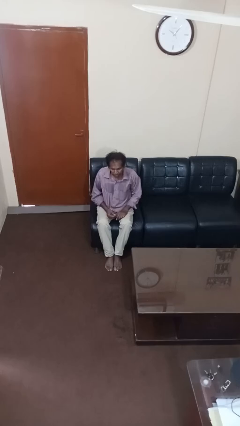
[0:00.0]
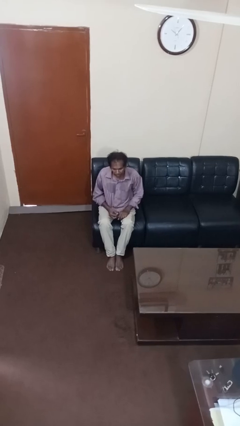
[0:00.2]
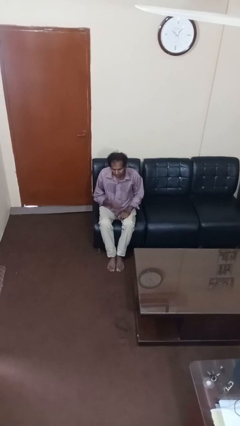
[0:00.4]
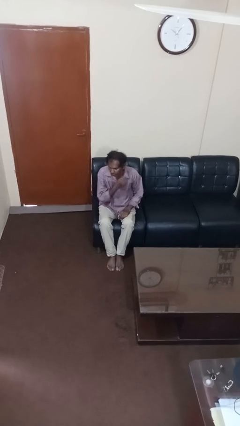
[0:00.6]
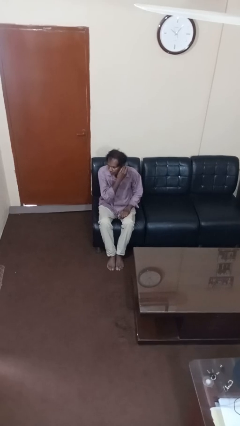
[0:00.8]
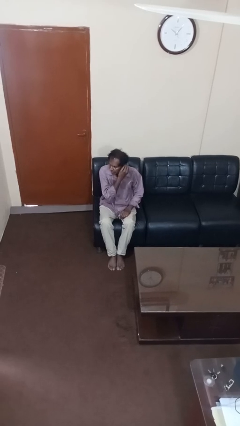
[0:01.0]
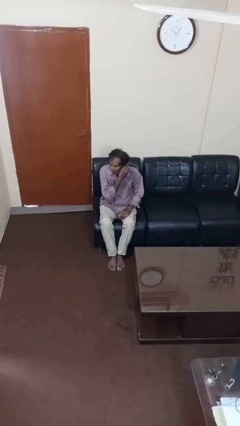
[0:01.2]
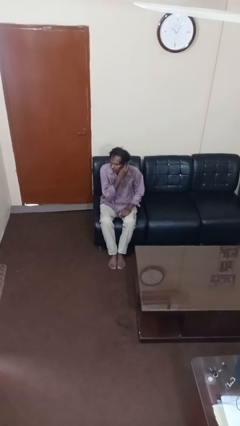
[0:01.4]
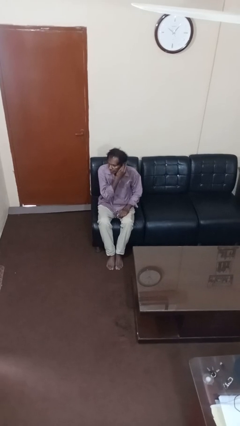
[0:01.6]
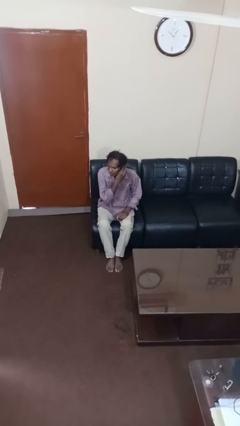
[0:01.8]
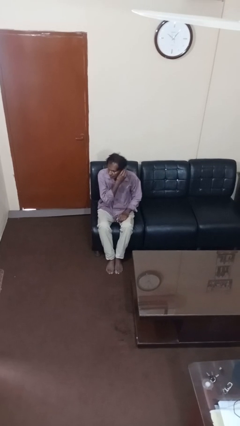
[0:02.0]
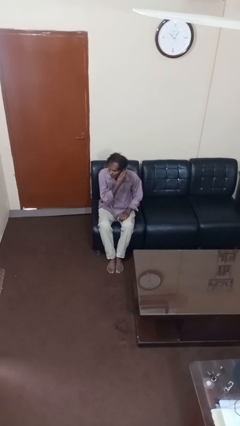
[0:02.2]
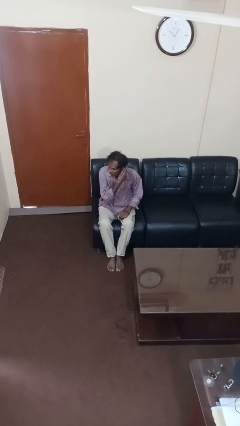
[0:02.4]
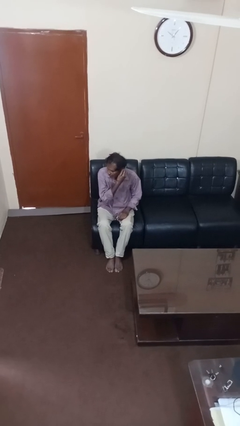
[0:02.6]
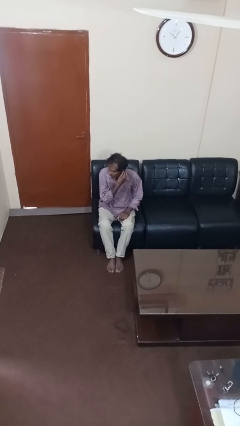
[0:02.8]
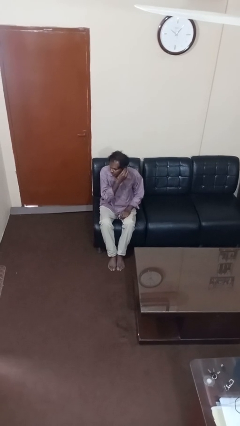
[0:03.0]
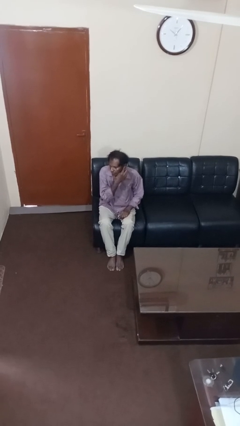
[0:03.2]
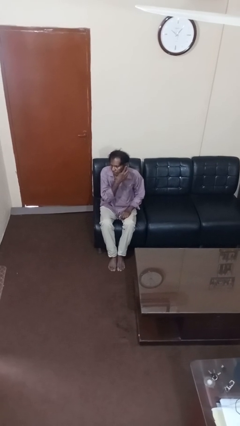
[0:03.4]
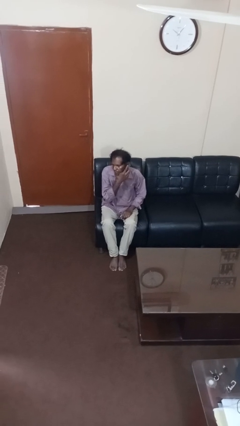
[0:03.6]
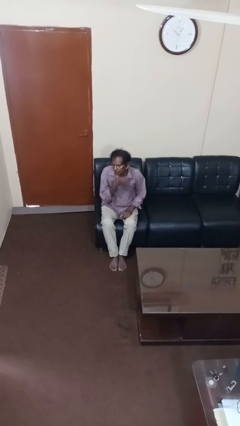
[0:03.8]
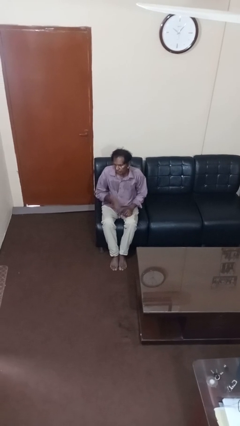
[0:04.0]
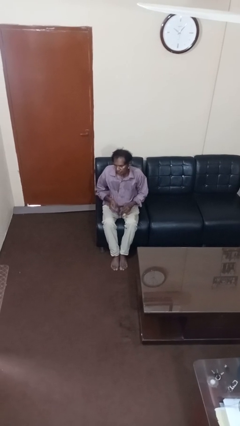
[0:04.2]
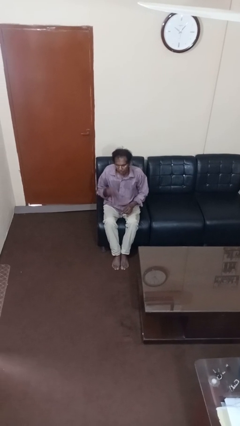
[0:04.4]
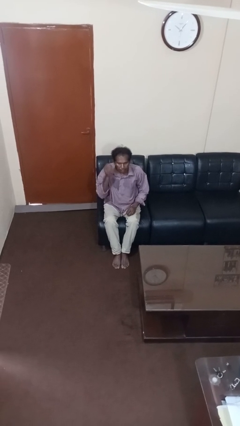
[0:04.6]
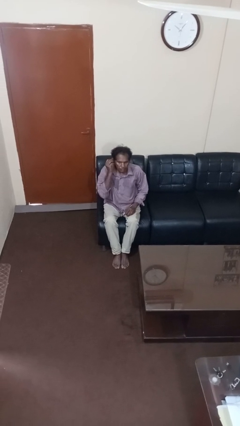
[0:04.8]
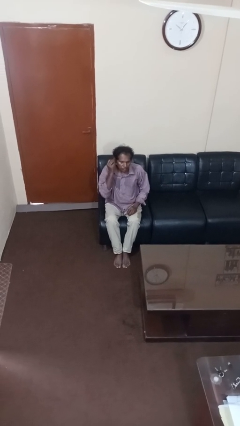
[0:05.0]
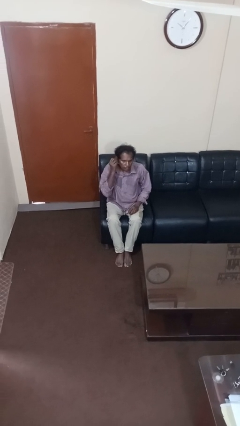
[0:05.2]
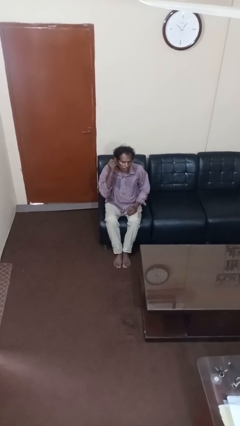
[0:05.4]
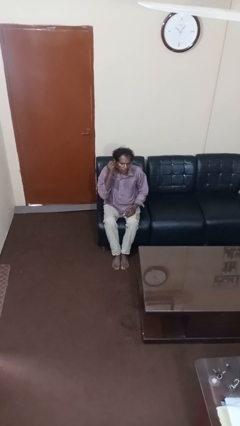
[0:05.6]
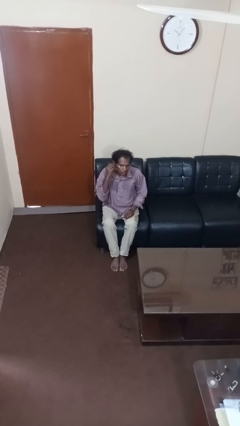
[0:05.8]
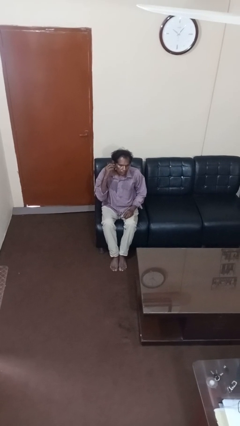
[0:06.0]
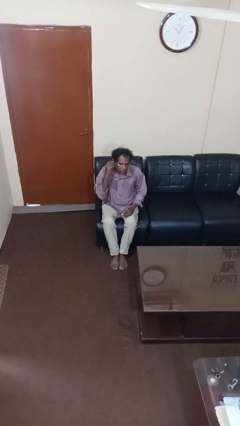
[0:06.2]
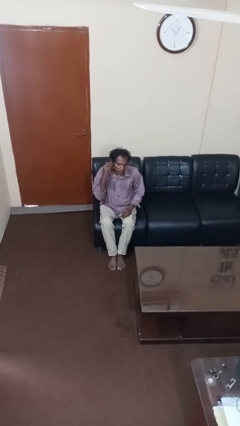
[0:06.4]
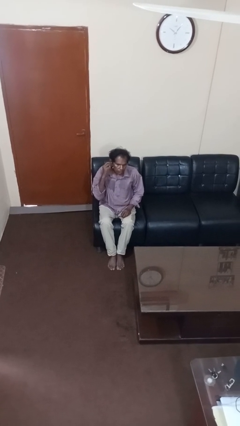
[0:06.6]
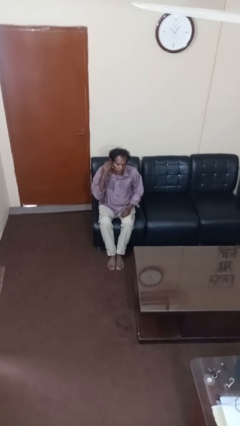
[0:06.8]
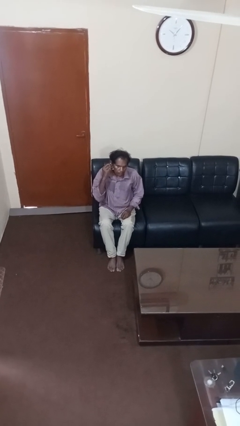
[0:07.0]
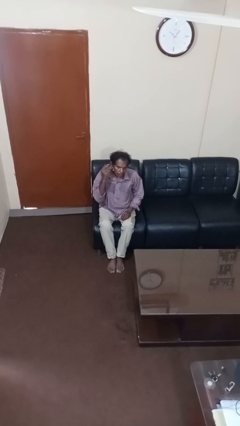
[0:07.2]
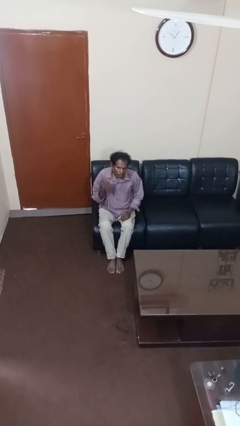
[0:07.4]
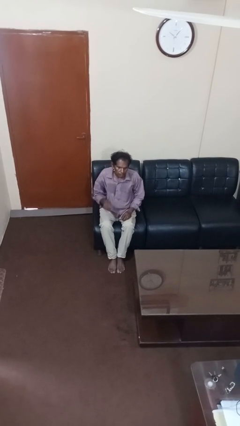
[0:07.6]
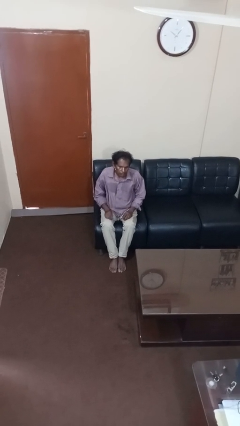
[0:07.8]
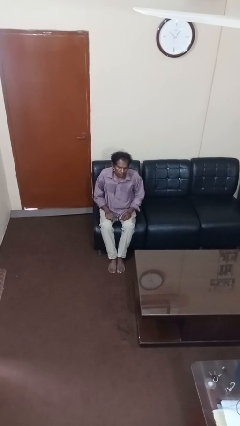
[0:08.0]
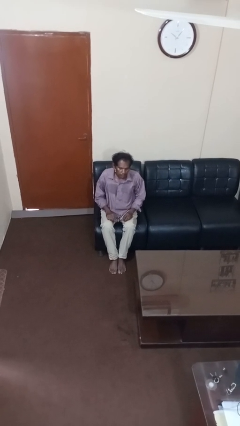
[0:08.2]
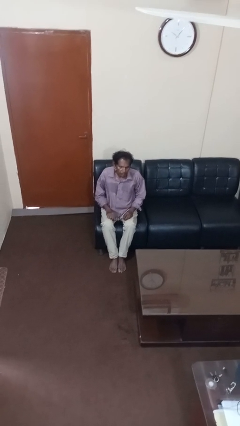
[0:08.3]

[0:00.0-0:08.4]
person puts on earrings

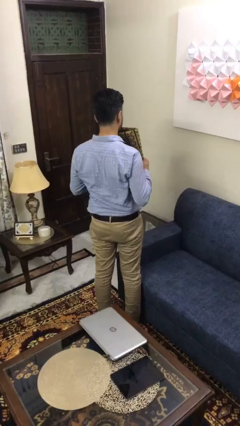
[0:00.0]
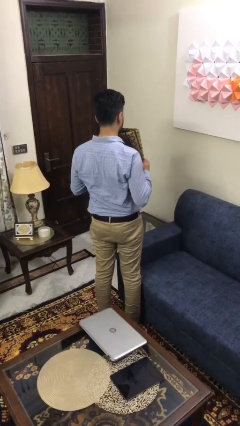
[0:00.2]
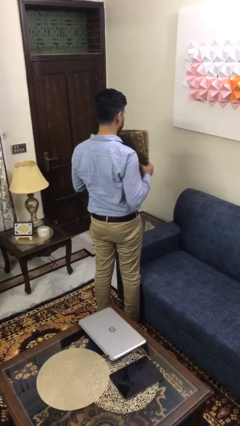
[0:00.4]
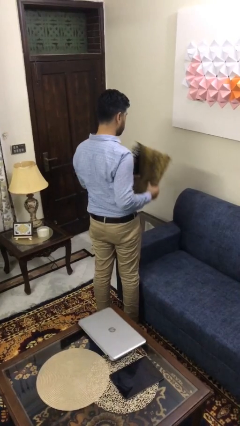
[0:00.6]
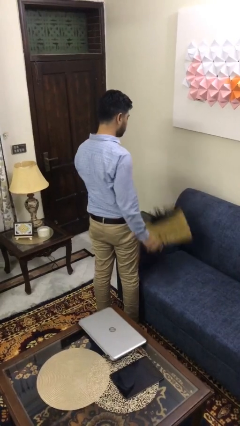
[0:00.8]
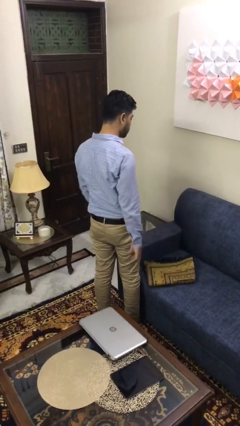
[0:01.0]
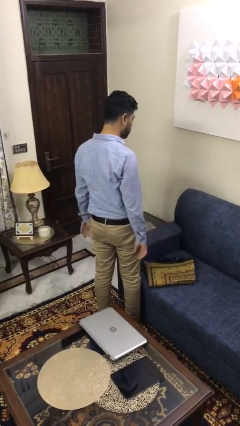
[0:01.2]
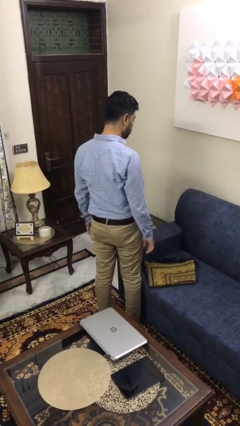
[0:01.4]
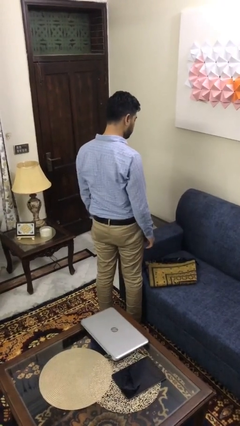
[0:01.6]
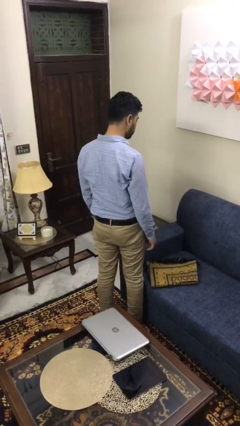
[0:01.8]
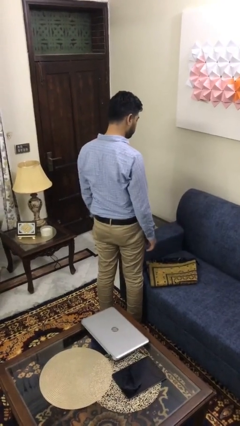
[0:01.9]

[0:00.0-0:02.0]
person puts down object on couch

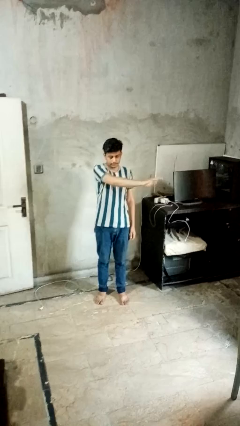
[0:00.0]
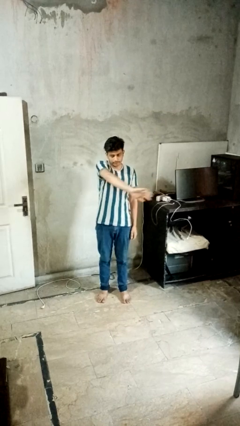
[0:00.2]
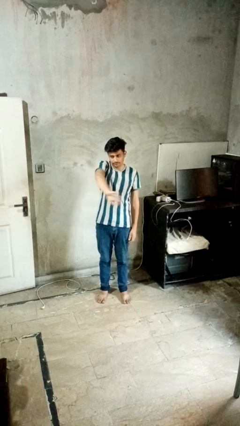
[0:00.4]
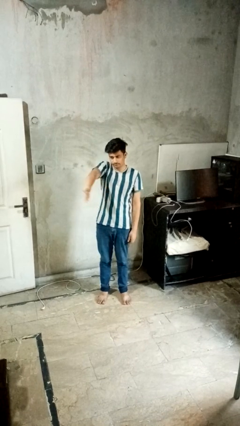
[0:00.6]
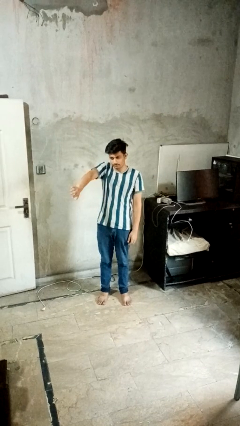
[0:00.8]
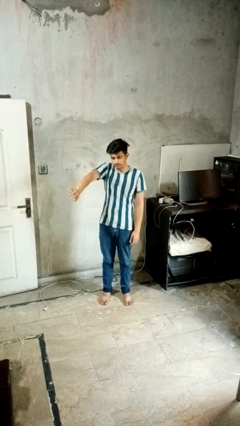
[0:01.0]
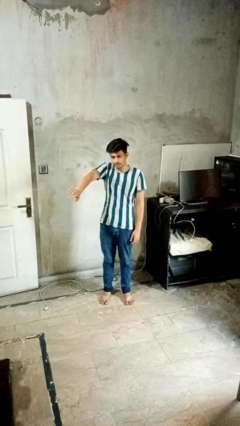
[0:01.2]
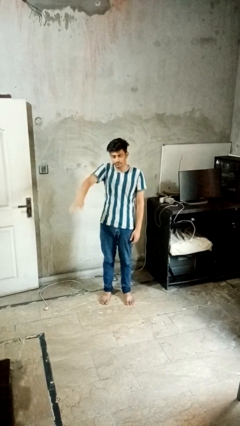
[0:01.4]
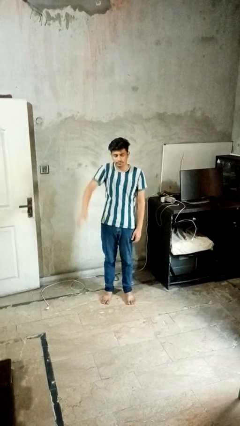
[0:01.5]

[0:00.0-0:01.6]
person gestures swipe right

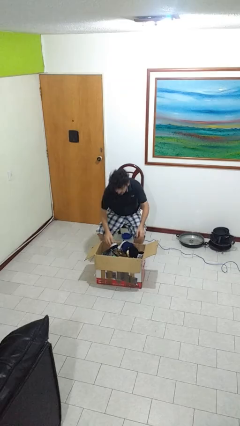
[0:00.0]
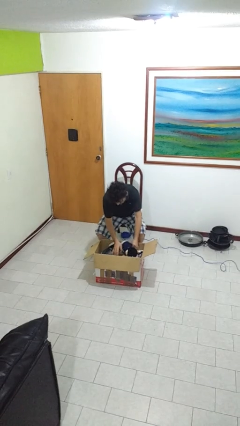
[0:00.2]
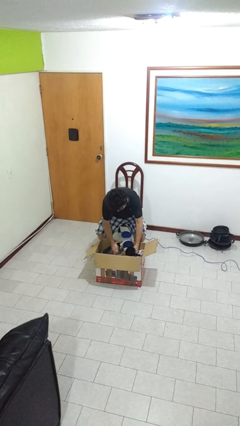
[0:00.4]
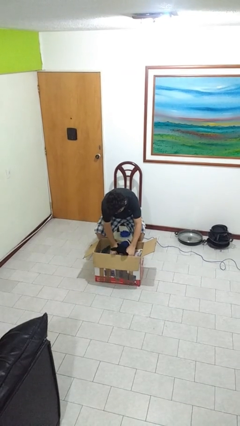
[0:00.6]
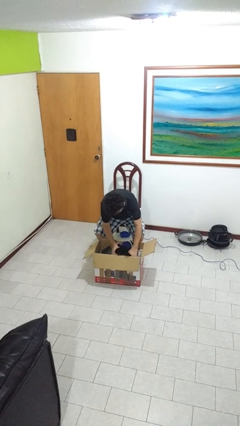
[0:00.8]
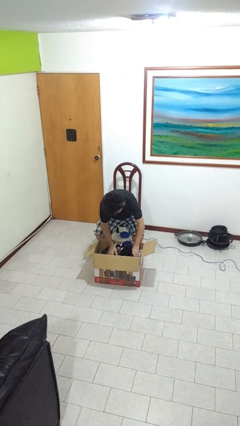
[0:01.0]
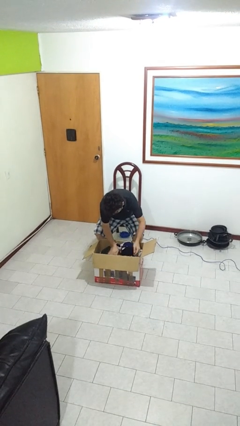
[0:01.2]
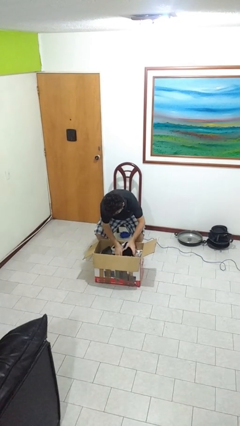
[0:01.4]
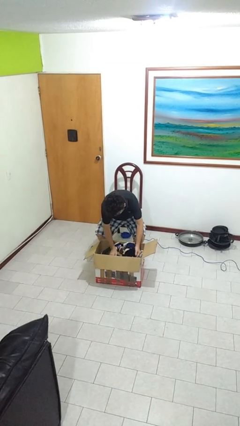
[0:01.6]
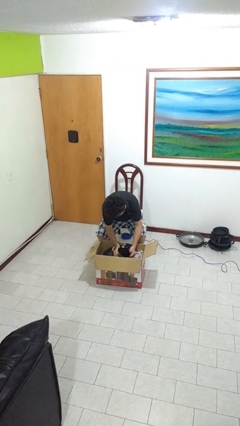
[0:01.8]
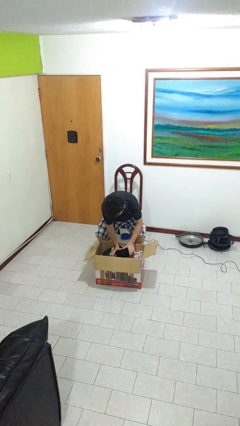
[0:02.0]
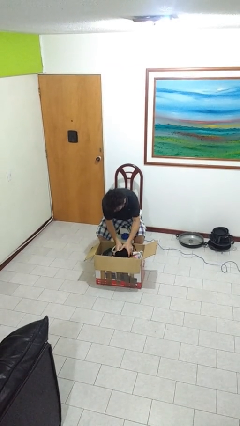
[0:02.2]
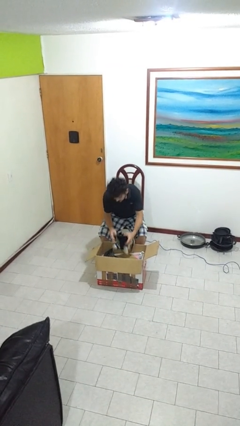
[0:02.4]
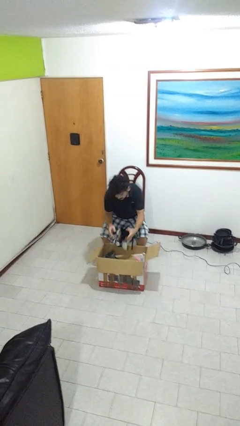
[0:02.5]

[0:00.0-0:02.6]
person searches in box

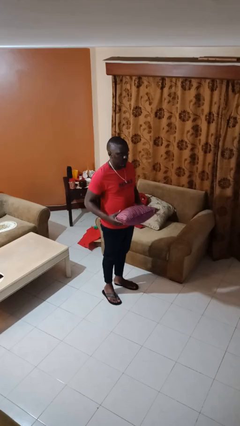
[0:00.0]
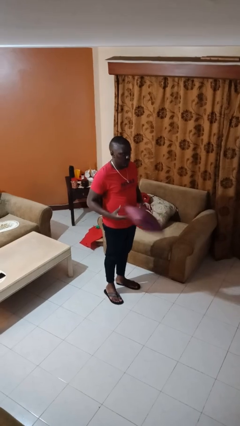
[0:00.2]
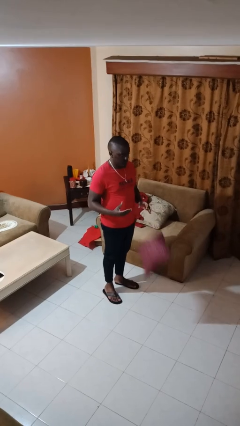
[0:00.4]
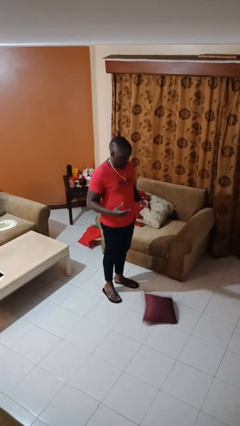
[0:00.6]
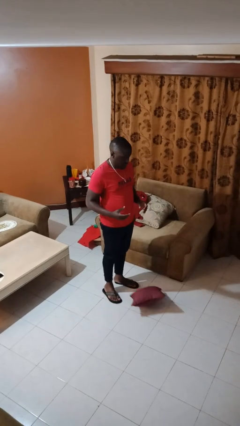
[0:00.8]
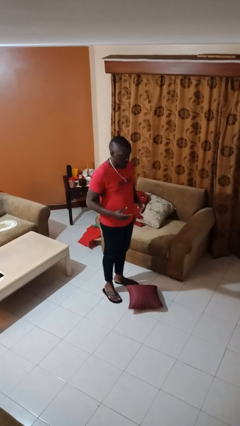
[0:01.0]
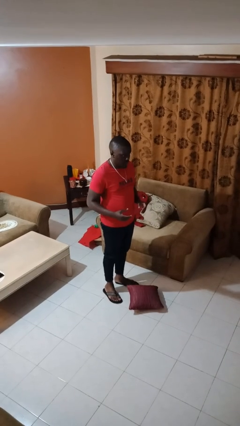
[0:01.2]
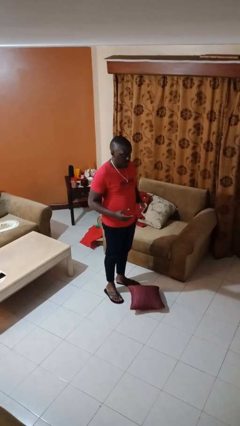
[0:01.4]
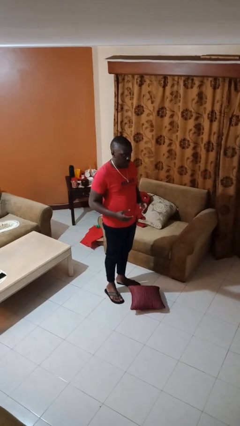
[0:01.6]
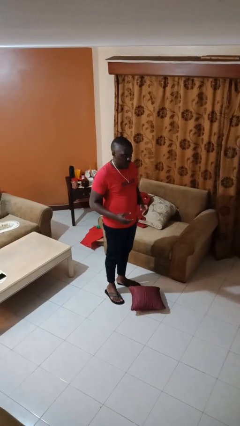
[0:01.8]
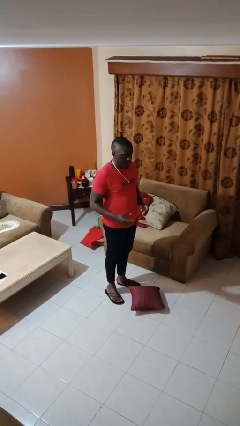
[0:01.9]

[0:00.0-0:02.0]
person drops object

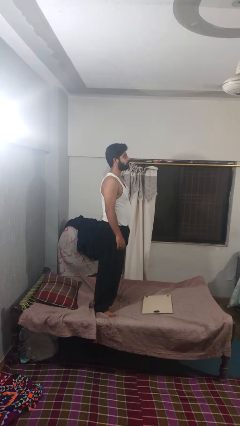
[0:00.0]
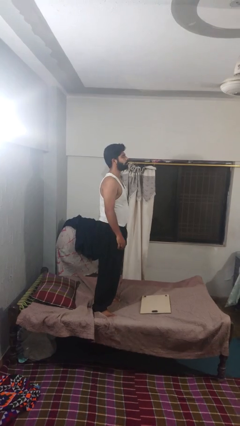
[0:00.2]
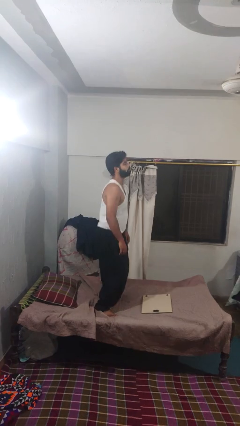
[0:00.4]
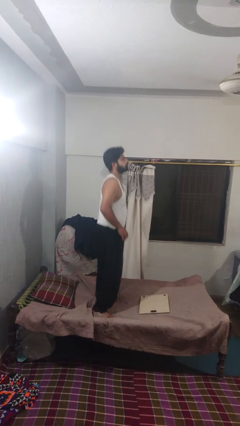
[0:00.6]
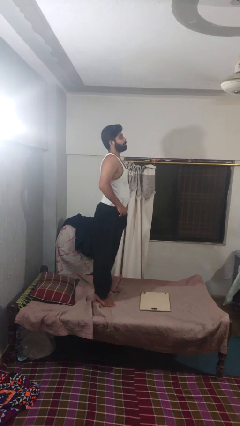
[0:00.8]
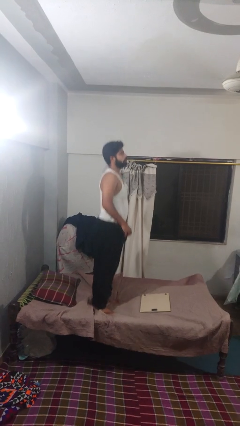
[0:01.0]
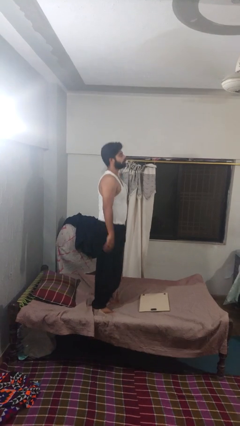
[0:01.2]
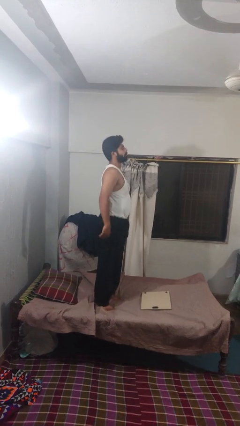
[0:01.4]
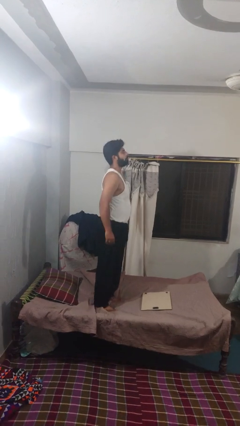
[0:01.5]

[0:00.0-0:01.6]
person jumps on bed
